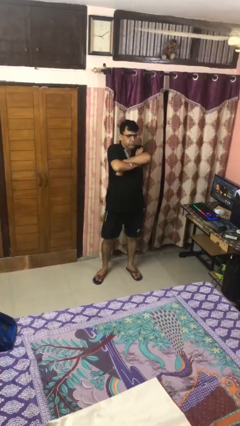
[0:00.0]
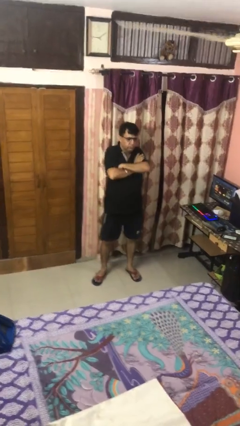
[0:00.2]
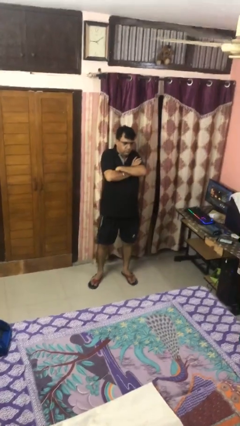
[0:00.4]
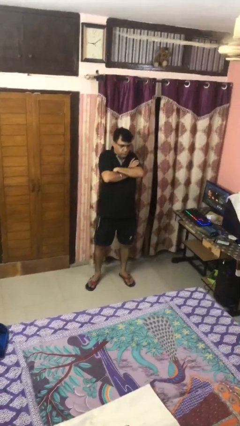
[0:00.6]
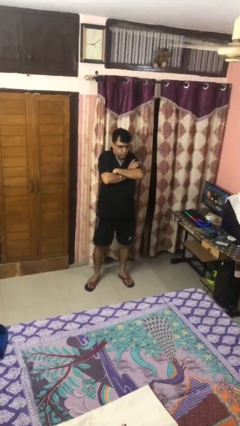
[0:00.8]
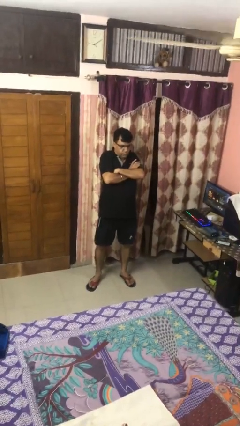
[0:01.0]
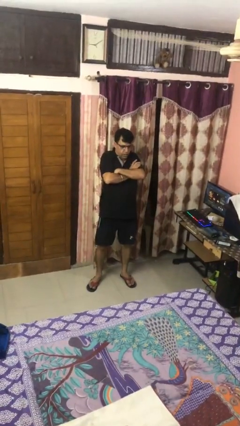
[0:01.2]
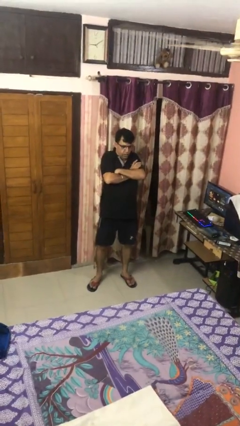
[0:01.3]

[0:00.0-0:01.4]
person crosses arms

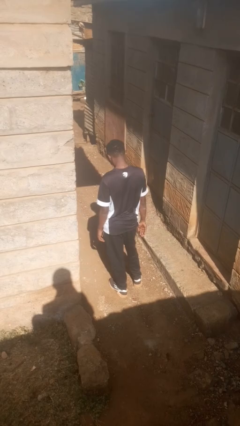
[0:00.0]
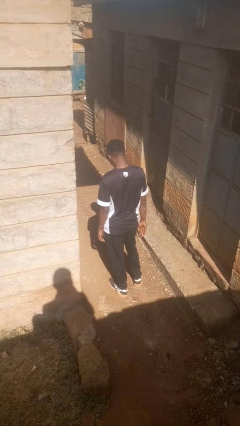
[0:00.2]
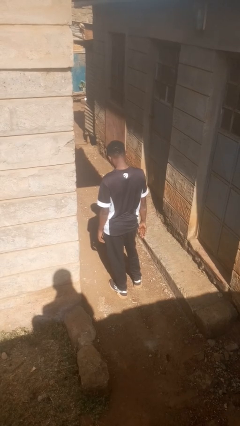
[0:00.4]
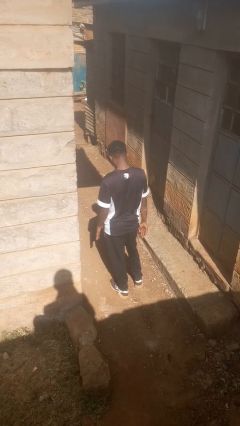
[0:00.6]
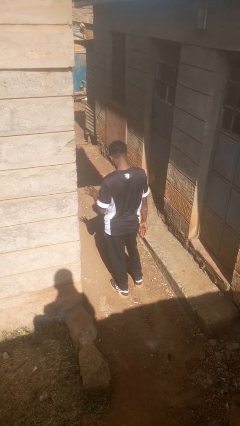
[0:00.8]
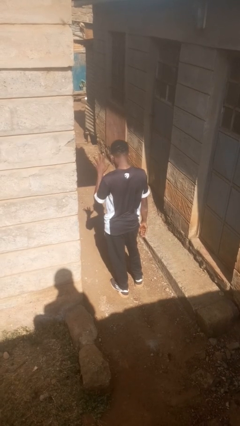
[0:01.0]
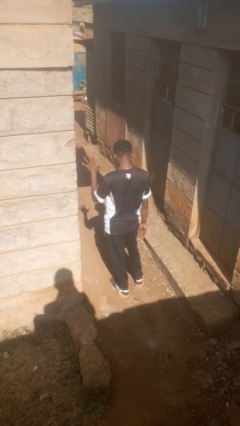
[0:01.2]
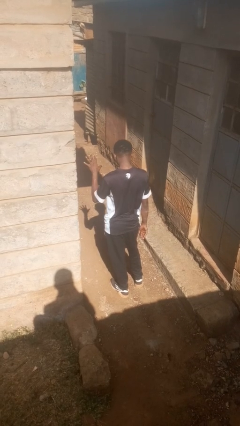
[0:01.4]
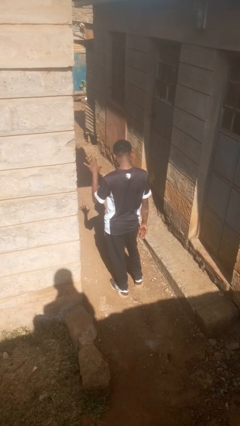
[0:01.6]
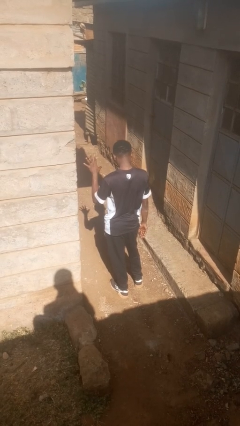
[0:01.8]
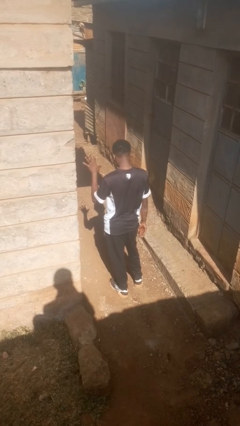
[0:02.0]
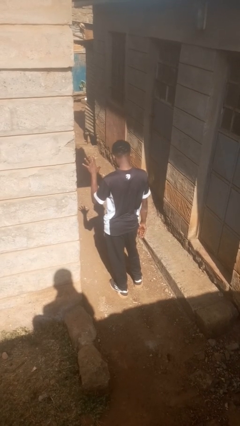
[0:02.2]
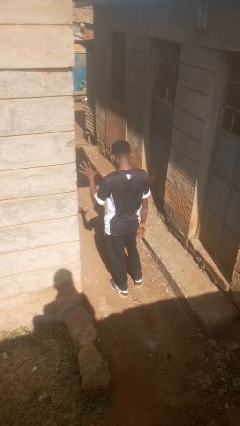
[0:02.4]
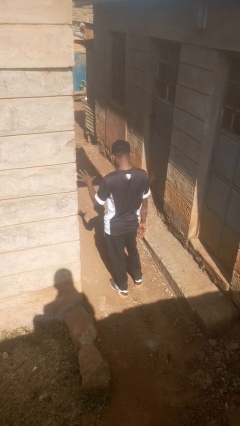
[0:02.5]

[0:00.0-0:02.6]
person gestures number five

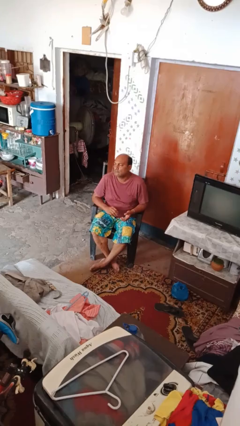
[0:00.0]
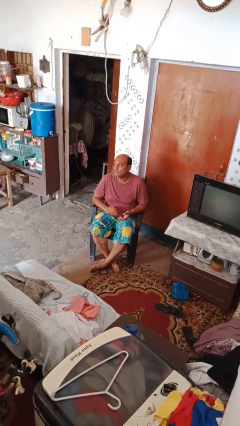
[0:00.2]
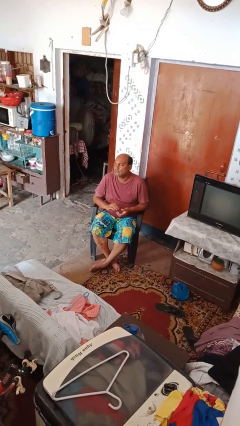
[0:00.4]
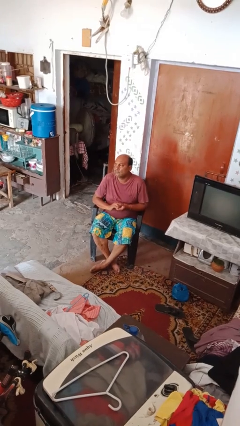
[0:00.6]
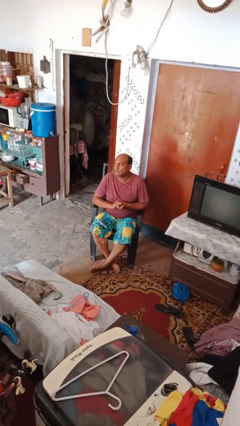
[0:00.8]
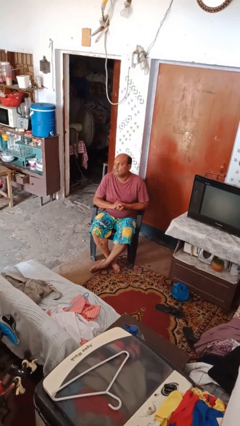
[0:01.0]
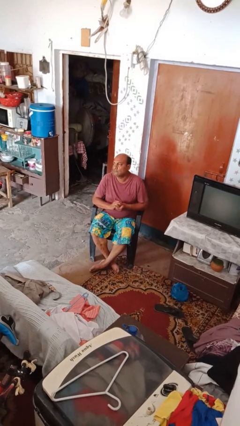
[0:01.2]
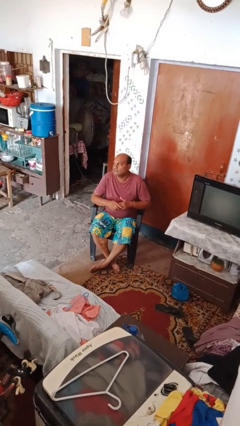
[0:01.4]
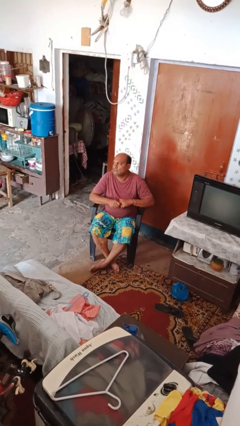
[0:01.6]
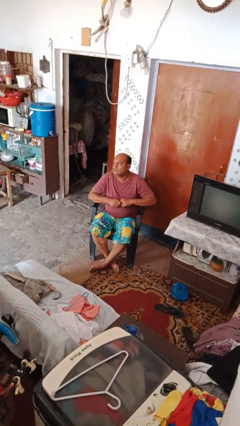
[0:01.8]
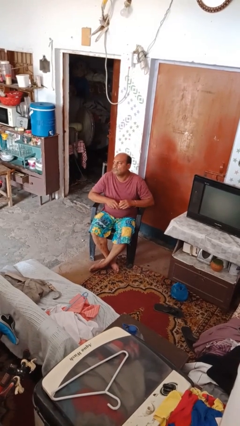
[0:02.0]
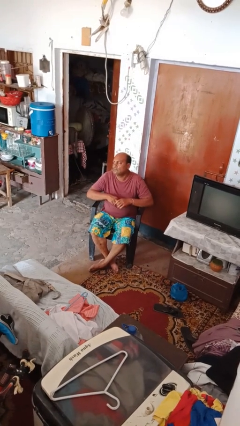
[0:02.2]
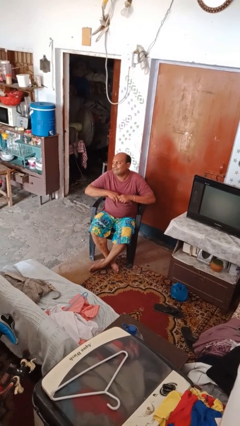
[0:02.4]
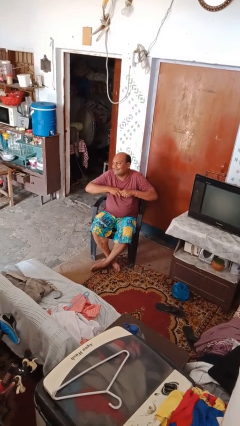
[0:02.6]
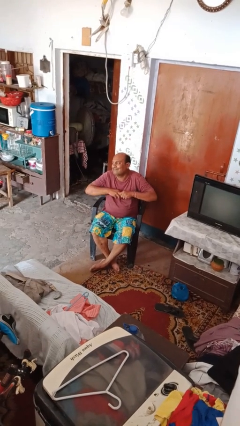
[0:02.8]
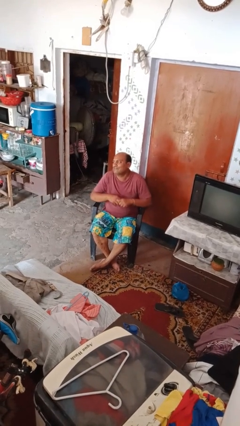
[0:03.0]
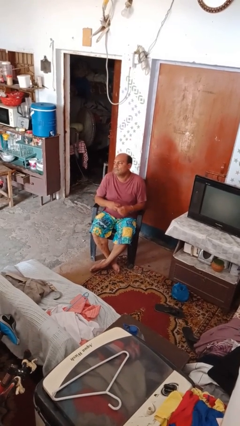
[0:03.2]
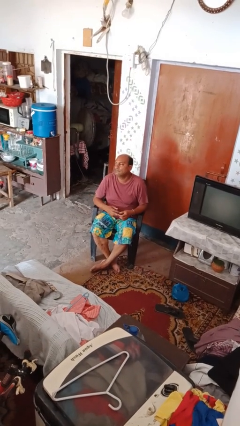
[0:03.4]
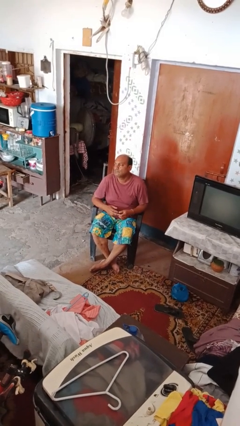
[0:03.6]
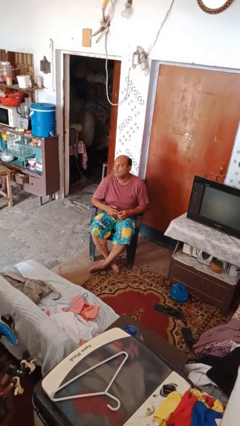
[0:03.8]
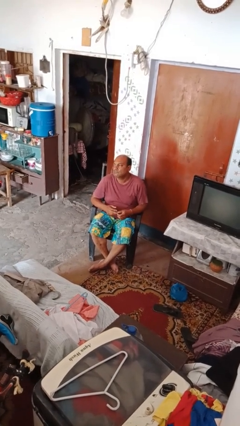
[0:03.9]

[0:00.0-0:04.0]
person cracks knuckles

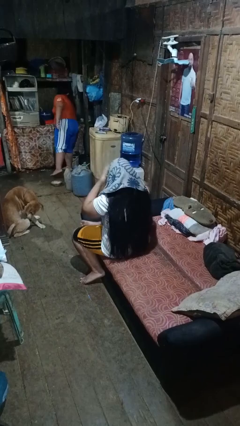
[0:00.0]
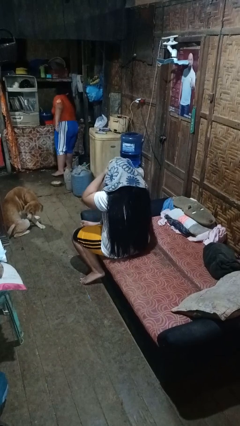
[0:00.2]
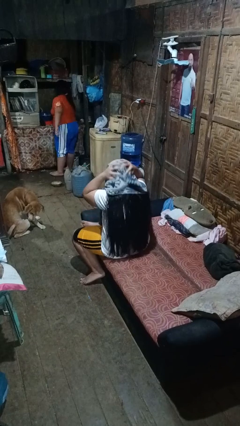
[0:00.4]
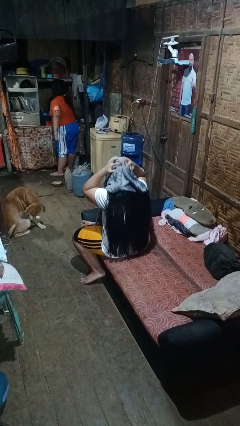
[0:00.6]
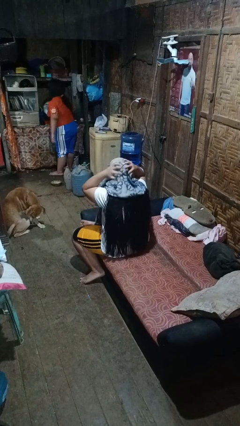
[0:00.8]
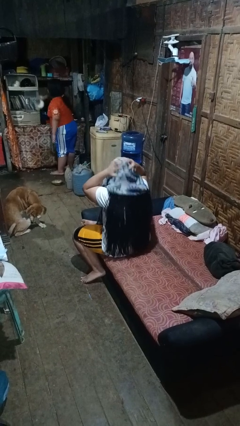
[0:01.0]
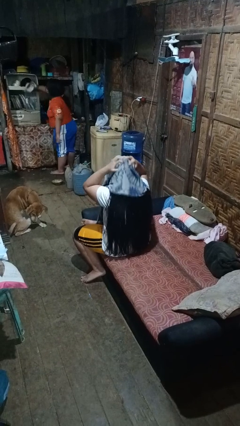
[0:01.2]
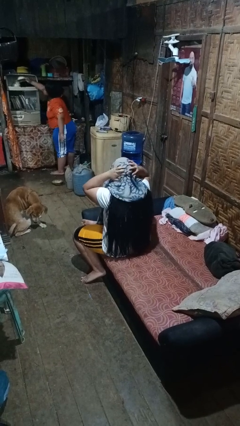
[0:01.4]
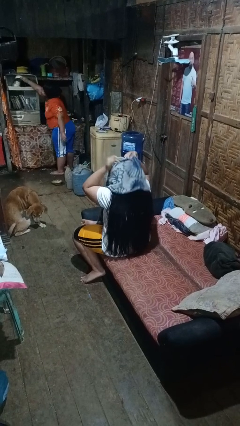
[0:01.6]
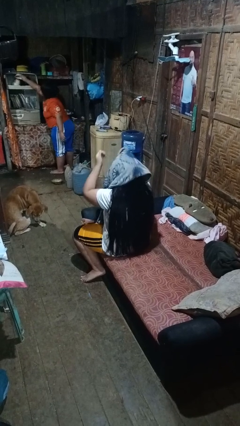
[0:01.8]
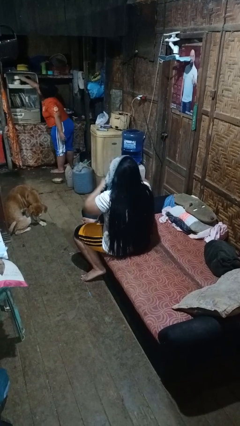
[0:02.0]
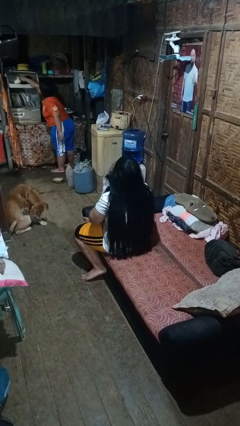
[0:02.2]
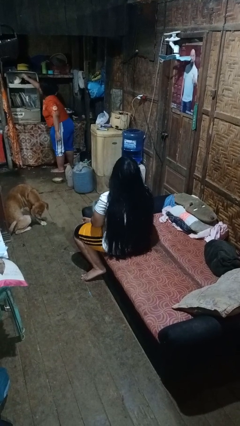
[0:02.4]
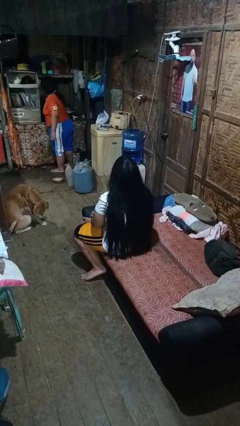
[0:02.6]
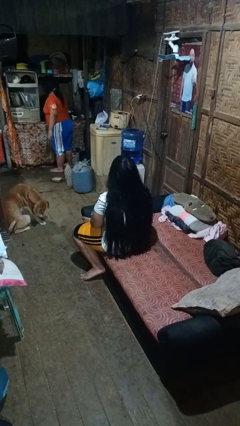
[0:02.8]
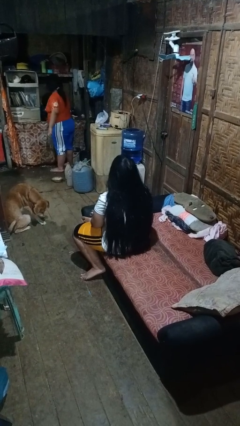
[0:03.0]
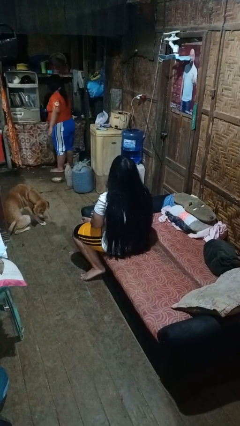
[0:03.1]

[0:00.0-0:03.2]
person dries hair with towel

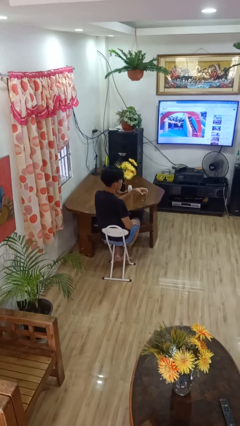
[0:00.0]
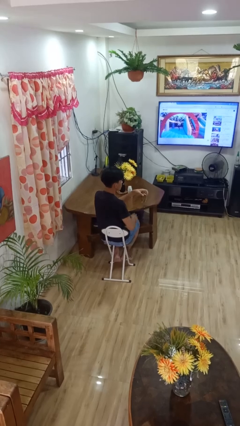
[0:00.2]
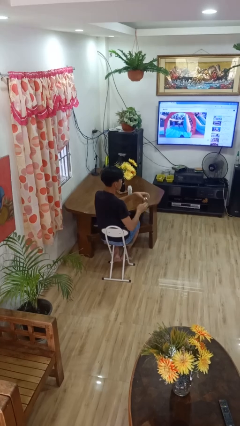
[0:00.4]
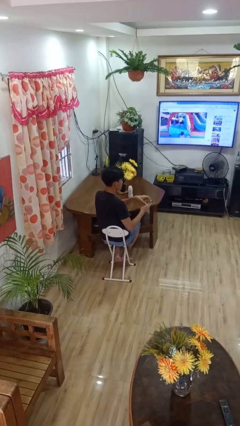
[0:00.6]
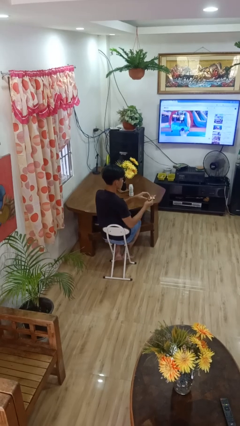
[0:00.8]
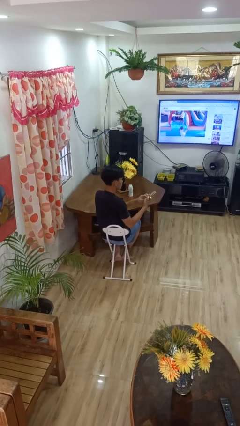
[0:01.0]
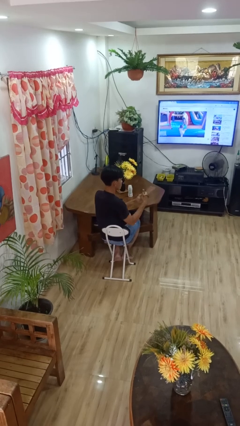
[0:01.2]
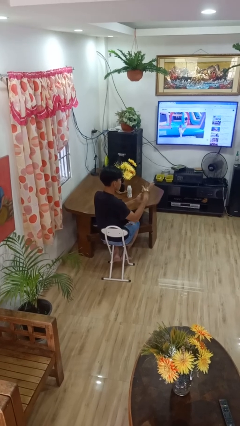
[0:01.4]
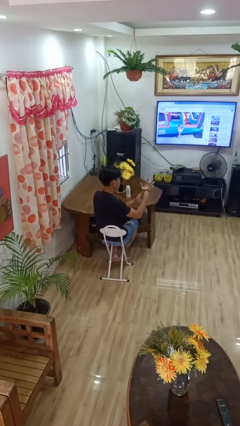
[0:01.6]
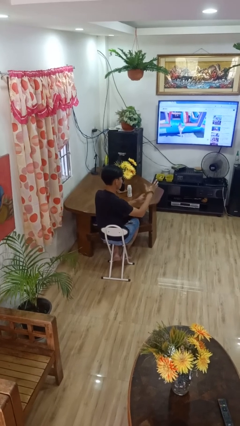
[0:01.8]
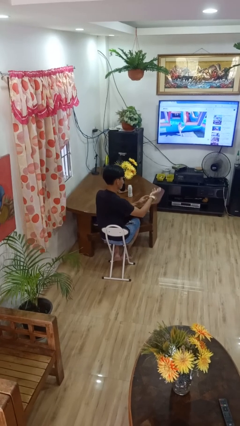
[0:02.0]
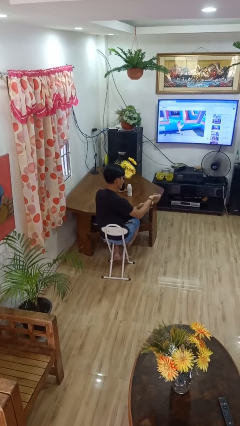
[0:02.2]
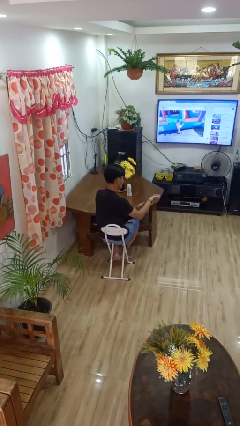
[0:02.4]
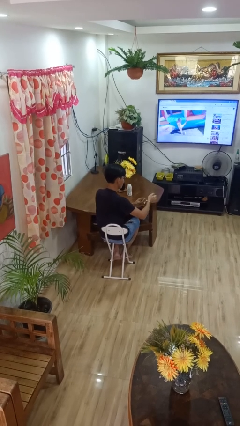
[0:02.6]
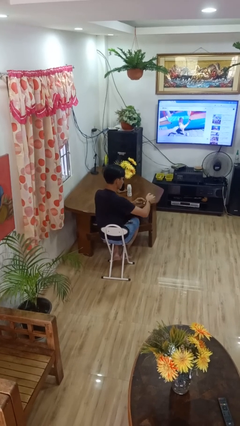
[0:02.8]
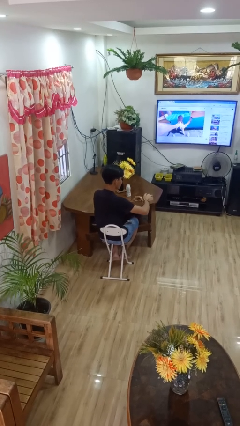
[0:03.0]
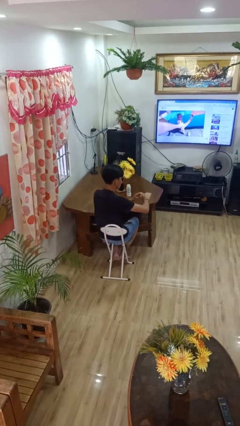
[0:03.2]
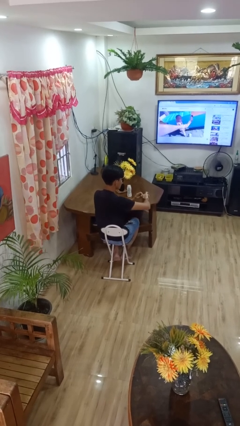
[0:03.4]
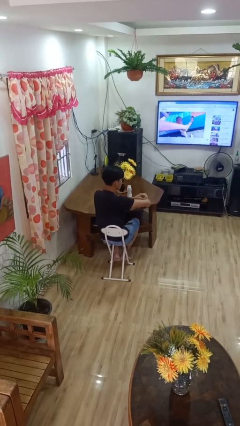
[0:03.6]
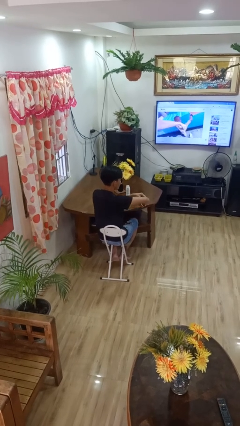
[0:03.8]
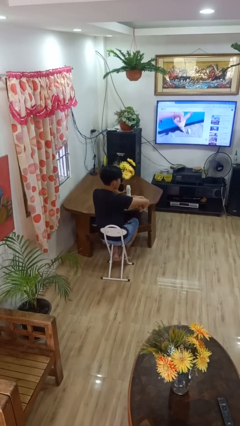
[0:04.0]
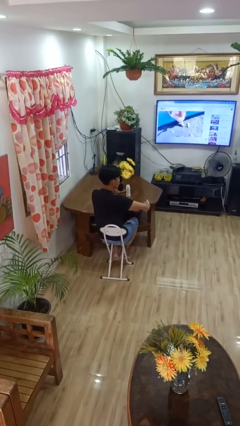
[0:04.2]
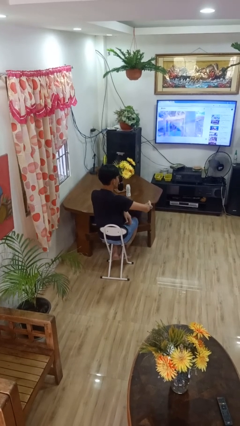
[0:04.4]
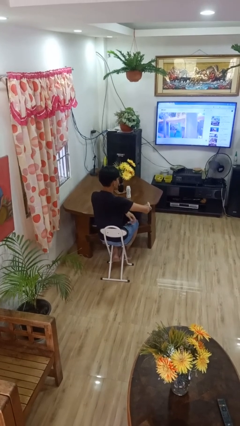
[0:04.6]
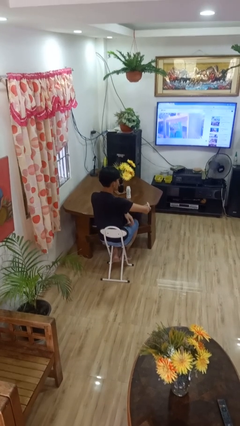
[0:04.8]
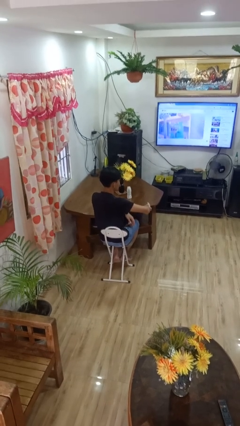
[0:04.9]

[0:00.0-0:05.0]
person puts on wristwatch

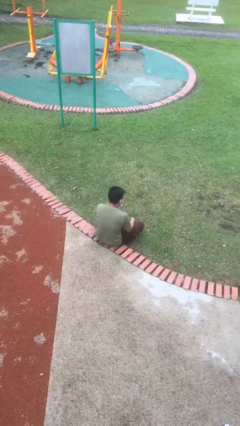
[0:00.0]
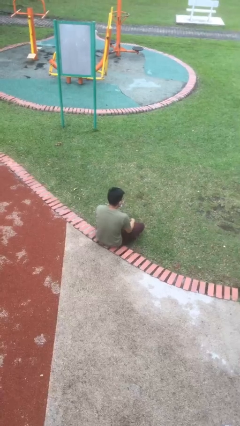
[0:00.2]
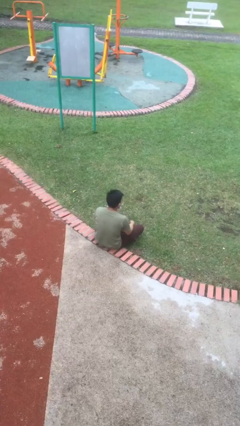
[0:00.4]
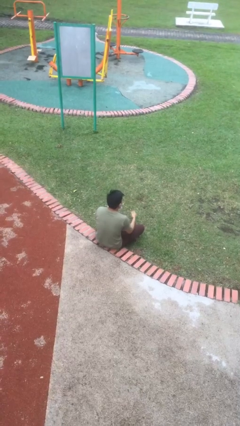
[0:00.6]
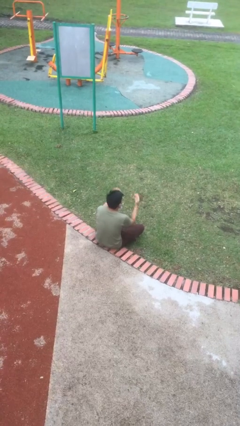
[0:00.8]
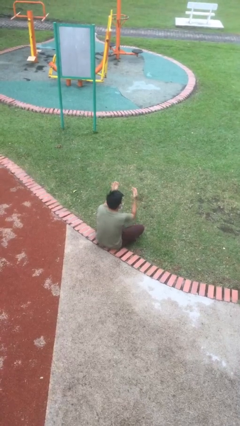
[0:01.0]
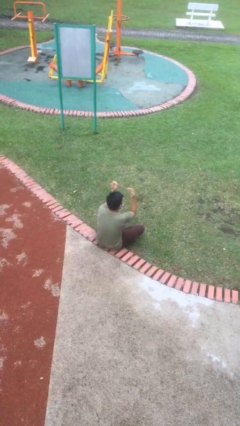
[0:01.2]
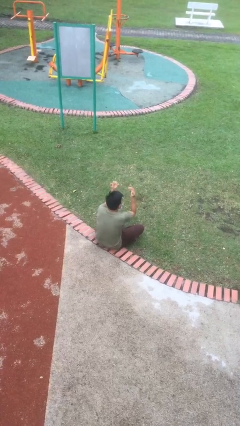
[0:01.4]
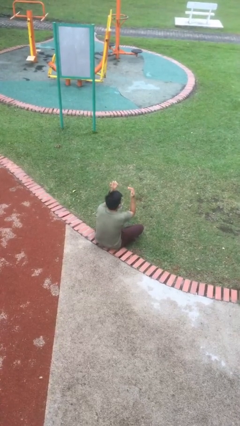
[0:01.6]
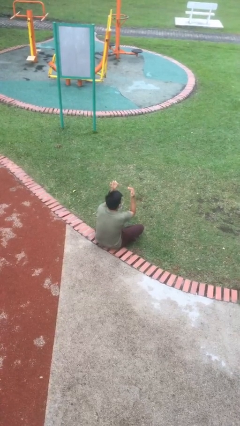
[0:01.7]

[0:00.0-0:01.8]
person prays
